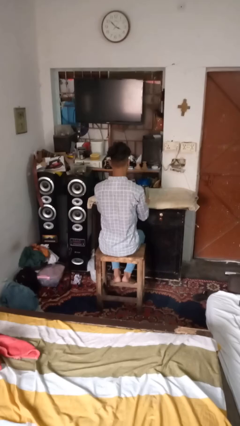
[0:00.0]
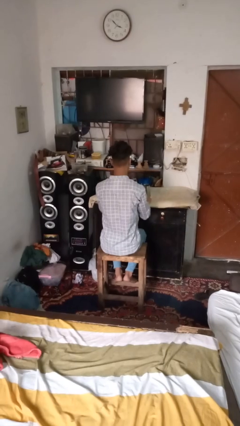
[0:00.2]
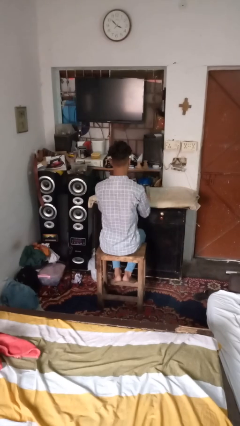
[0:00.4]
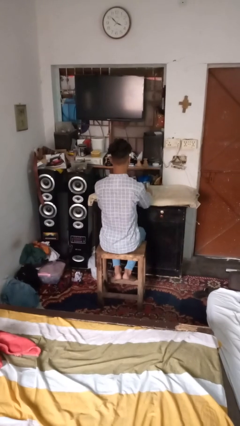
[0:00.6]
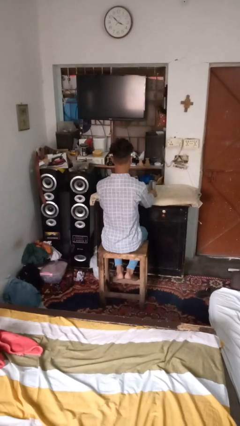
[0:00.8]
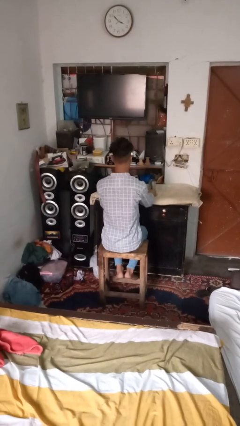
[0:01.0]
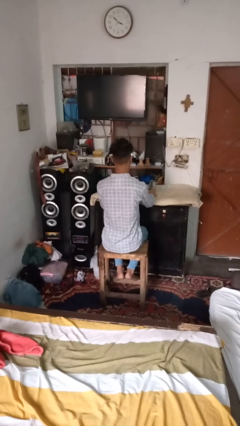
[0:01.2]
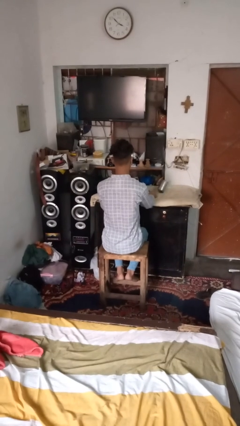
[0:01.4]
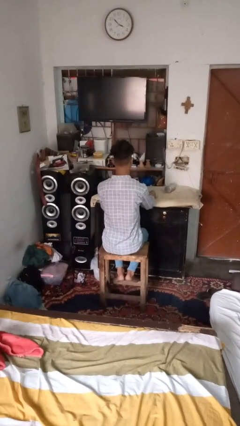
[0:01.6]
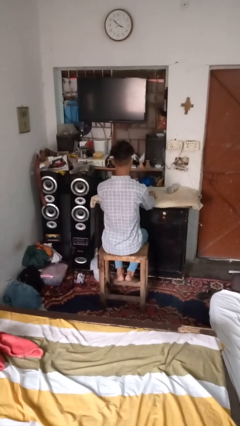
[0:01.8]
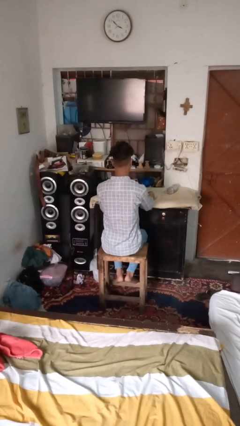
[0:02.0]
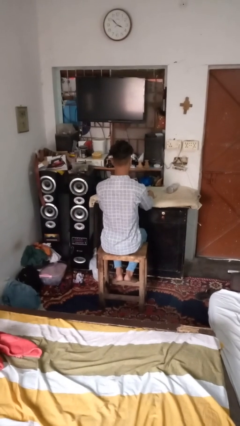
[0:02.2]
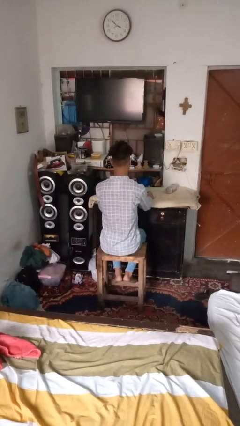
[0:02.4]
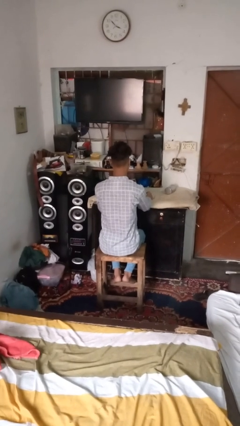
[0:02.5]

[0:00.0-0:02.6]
person knocks over glass

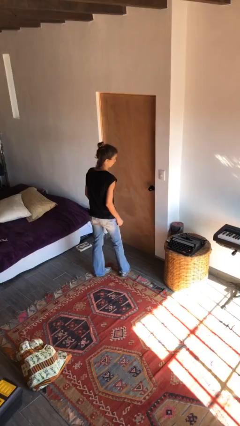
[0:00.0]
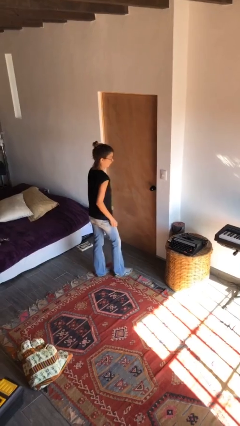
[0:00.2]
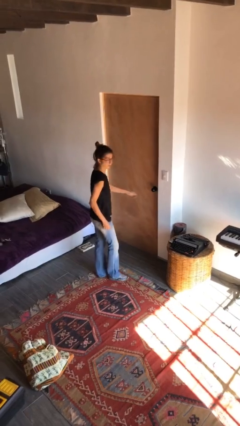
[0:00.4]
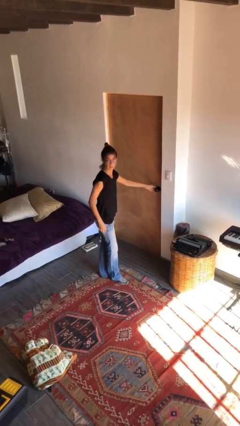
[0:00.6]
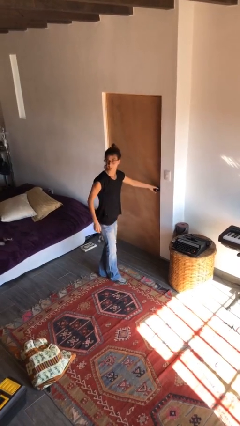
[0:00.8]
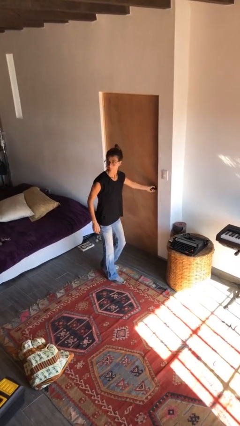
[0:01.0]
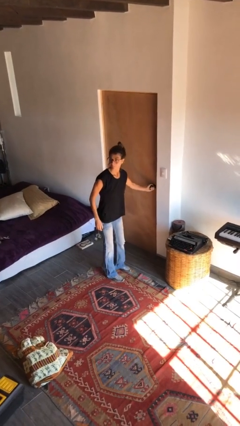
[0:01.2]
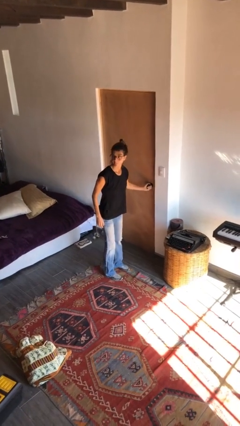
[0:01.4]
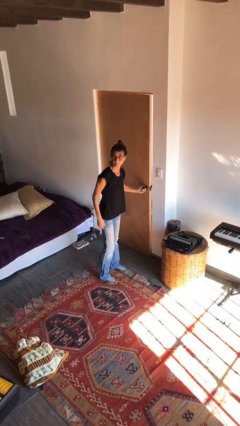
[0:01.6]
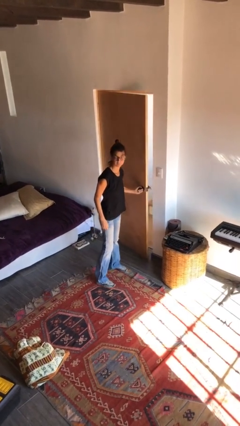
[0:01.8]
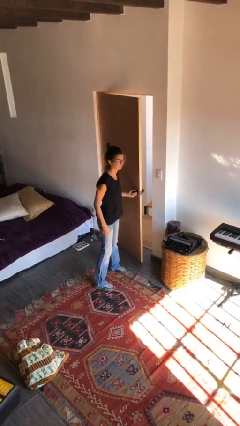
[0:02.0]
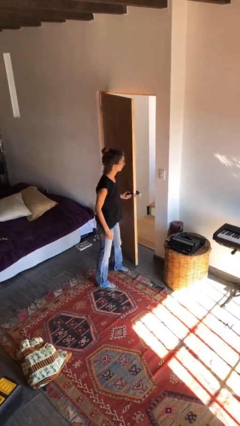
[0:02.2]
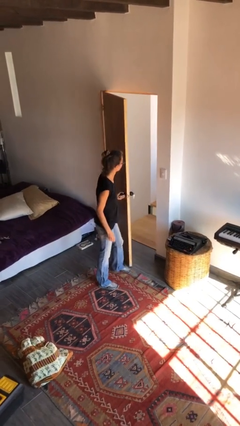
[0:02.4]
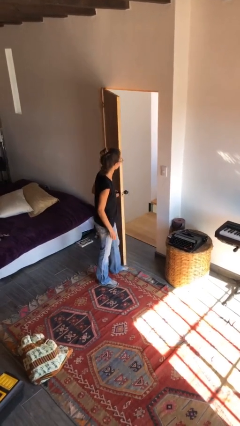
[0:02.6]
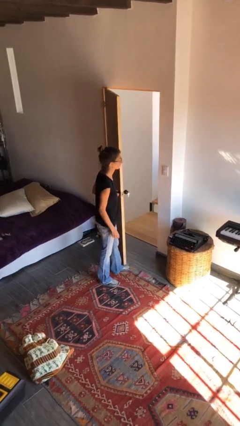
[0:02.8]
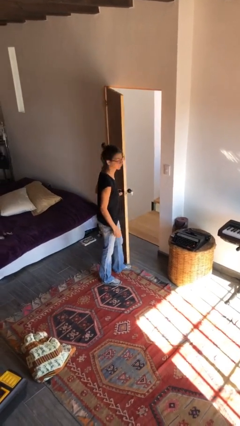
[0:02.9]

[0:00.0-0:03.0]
person opens facility door

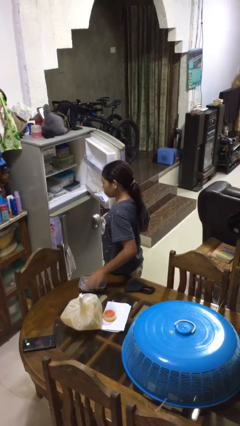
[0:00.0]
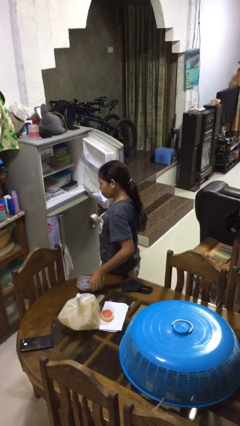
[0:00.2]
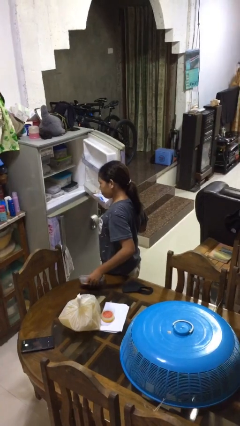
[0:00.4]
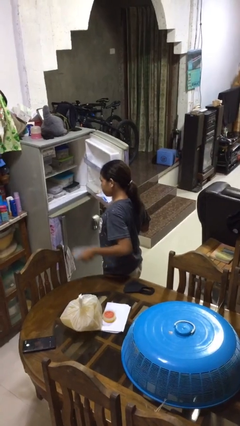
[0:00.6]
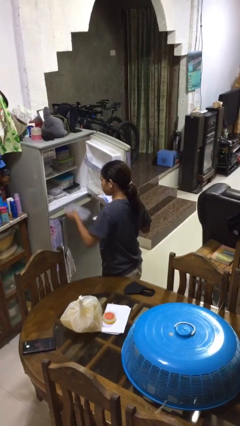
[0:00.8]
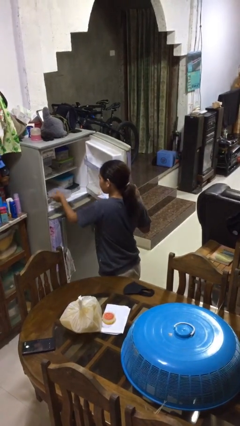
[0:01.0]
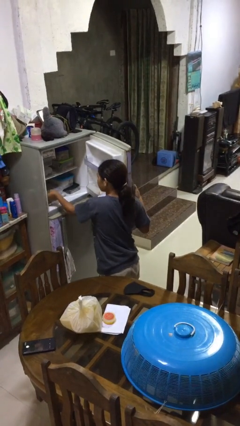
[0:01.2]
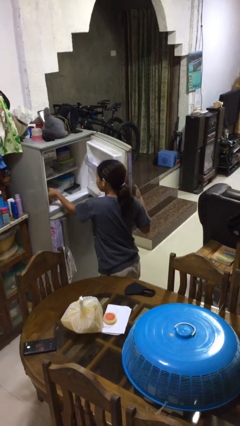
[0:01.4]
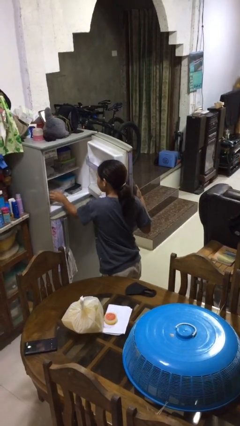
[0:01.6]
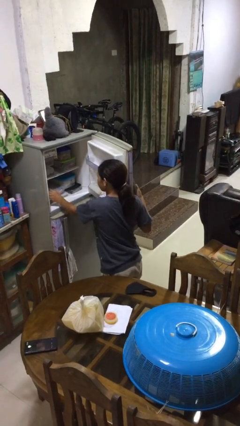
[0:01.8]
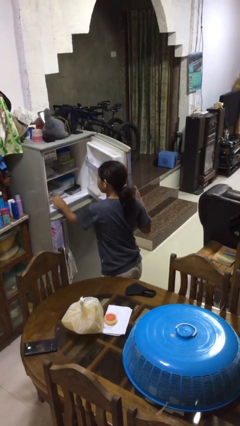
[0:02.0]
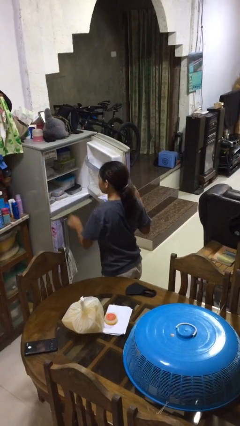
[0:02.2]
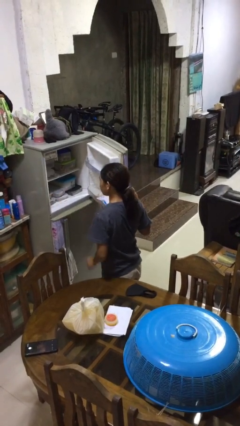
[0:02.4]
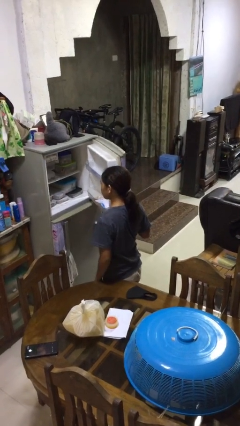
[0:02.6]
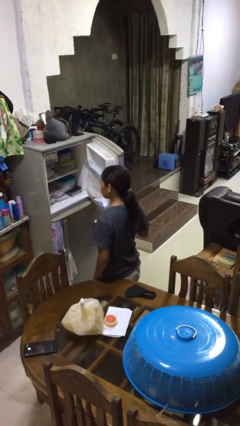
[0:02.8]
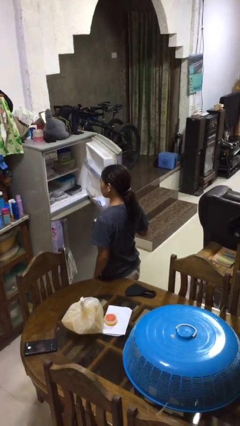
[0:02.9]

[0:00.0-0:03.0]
person puts object into refrigerator

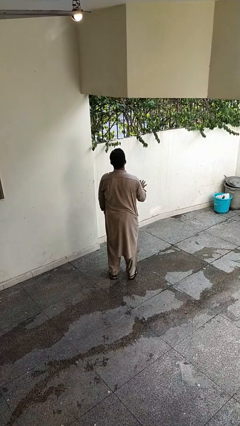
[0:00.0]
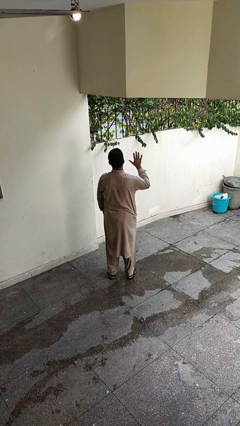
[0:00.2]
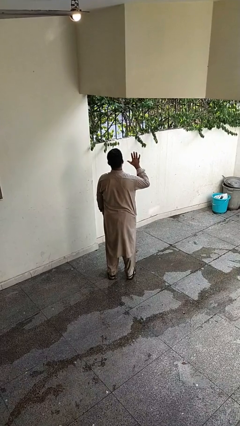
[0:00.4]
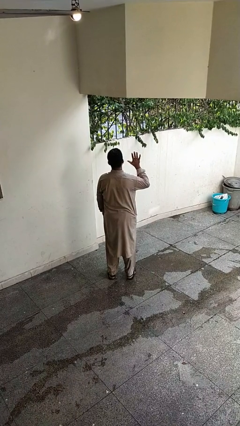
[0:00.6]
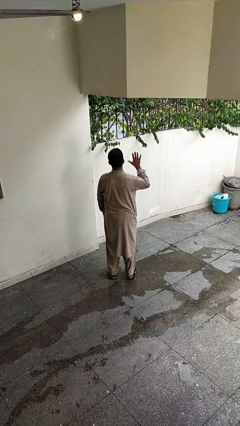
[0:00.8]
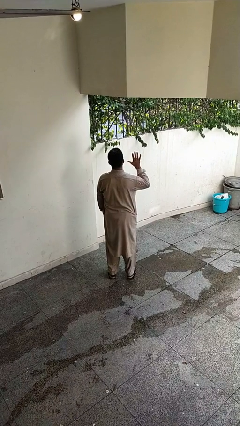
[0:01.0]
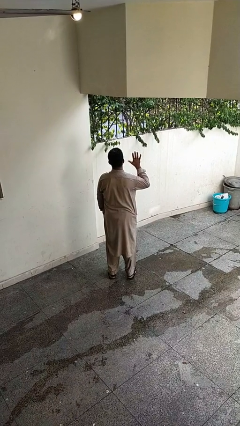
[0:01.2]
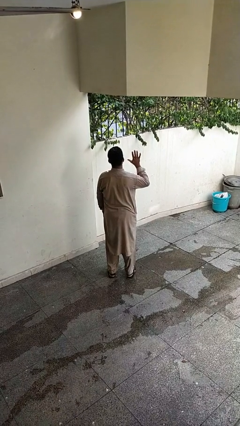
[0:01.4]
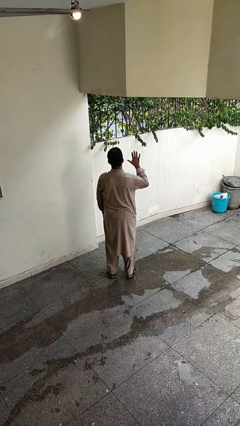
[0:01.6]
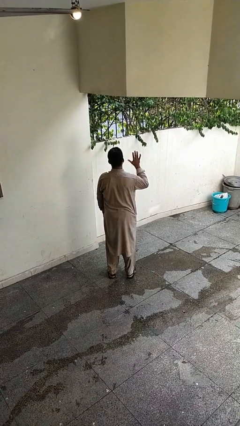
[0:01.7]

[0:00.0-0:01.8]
person gestures number five

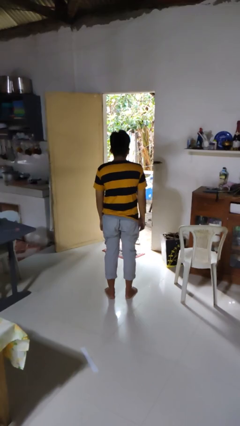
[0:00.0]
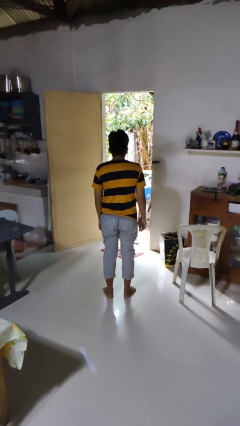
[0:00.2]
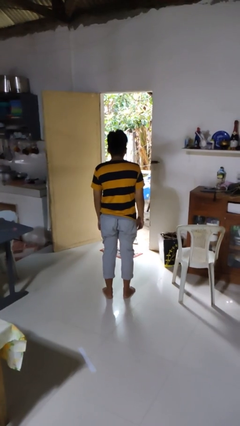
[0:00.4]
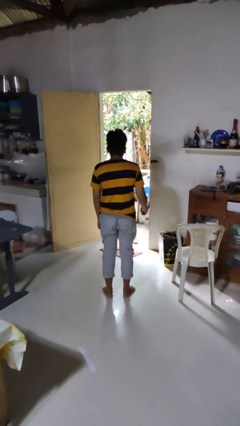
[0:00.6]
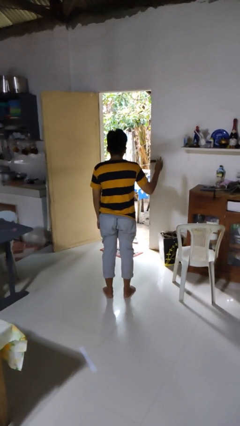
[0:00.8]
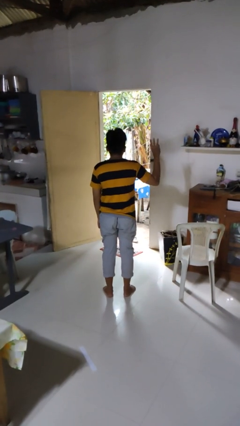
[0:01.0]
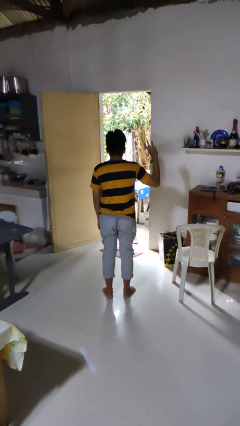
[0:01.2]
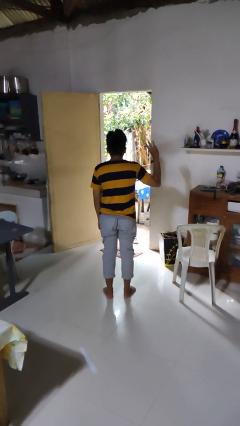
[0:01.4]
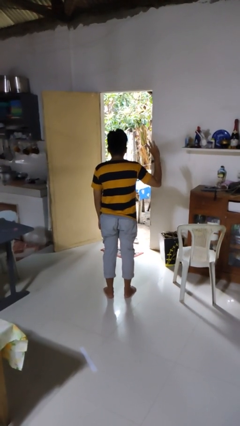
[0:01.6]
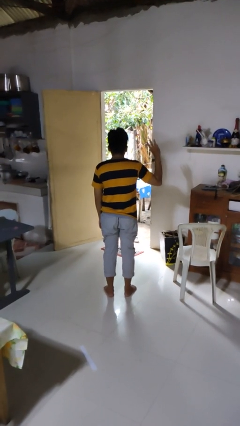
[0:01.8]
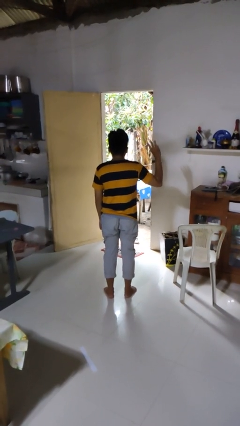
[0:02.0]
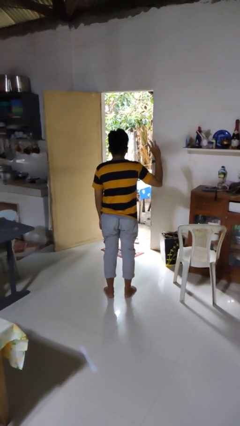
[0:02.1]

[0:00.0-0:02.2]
person gestures number three

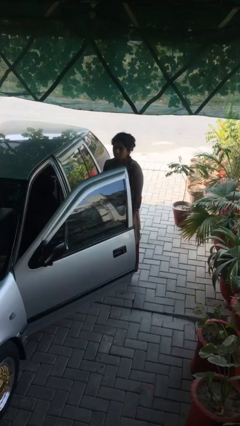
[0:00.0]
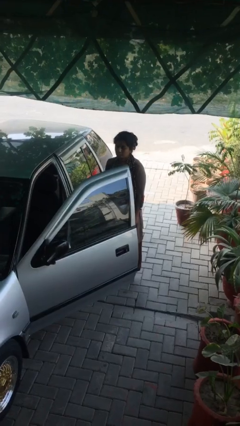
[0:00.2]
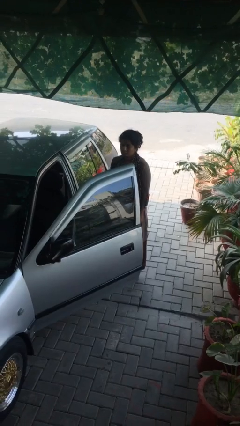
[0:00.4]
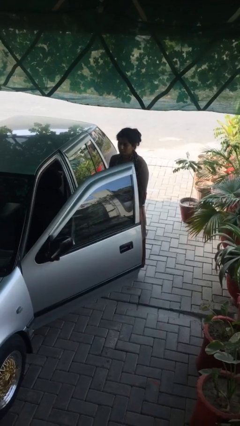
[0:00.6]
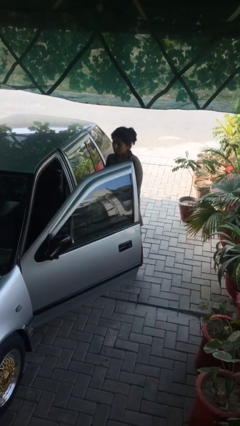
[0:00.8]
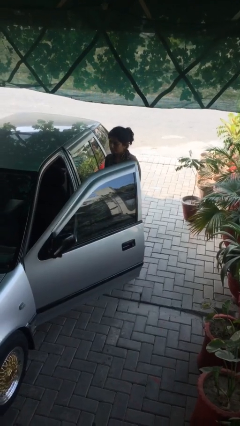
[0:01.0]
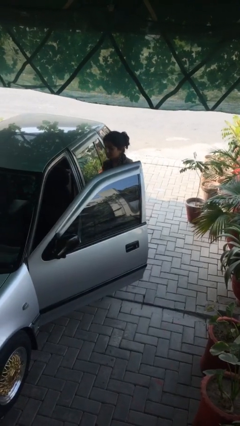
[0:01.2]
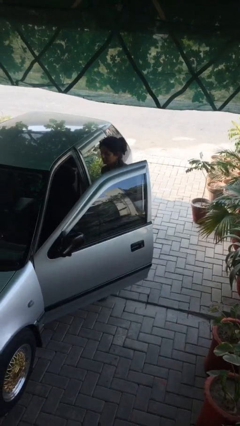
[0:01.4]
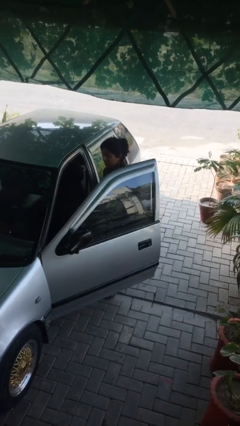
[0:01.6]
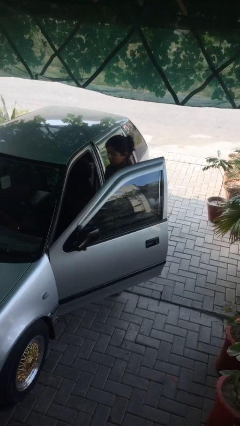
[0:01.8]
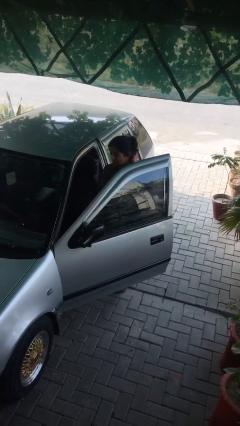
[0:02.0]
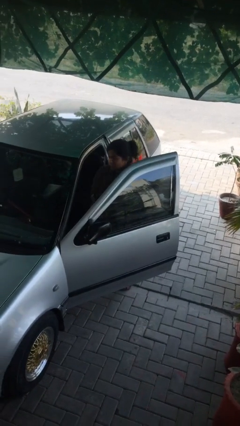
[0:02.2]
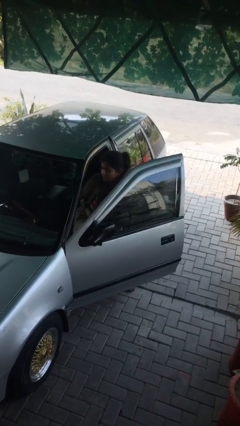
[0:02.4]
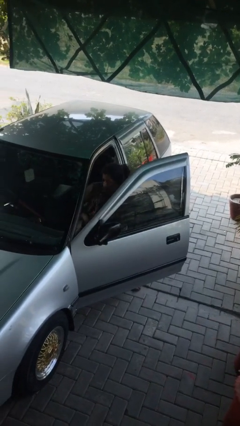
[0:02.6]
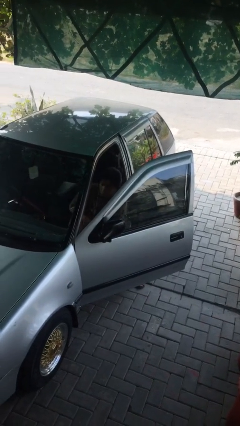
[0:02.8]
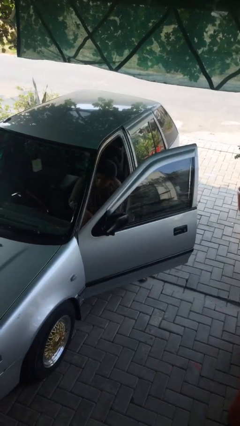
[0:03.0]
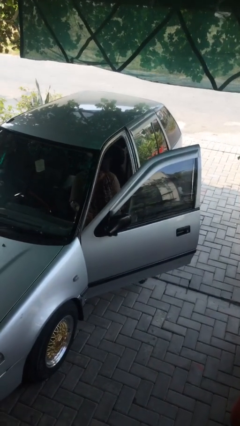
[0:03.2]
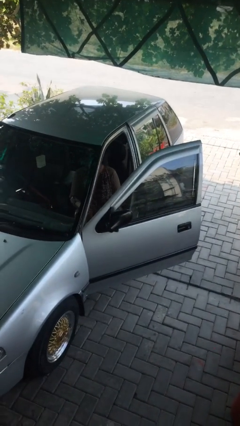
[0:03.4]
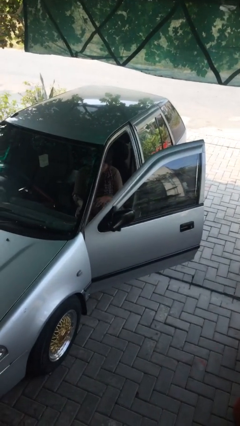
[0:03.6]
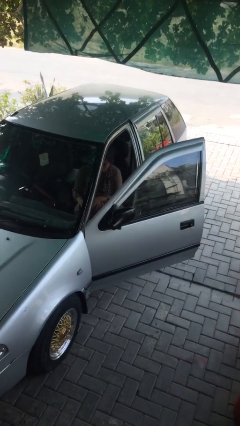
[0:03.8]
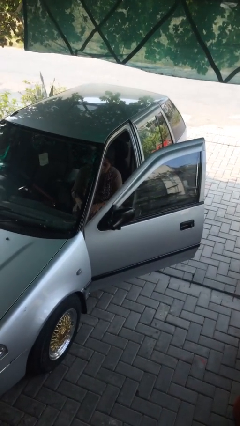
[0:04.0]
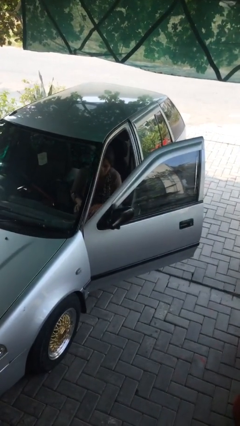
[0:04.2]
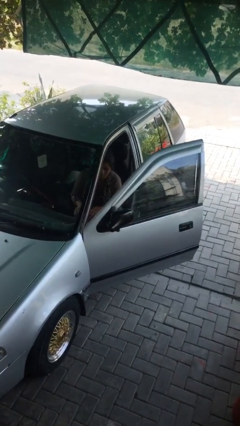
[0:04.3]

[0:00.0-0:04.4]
person enters car

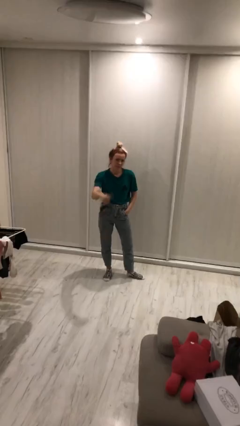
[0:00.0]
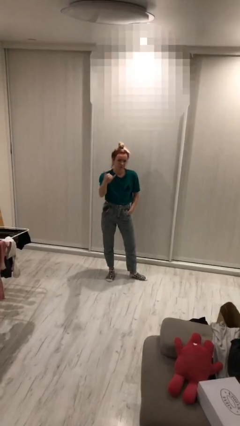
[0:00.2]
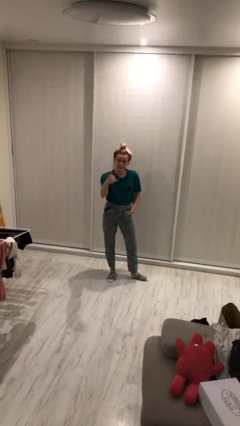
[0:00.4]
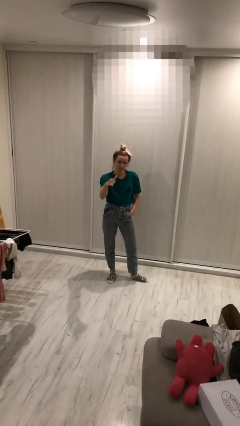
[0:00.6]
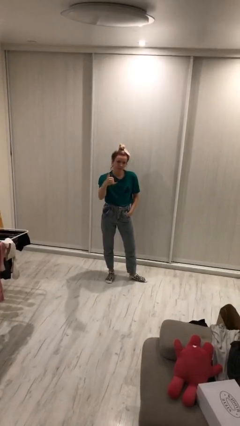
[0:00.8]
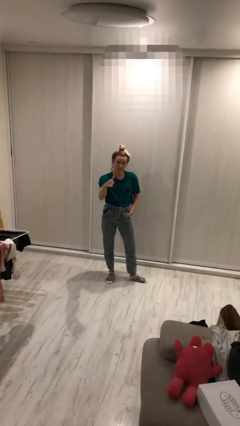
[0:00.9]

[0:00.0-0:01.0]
person gestures hang loose
